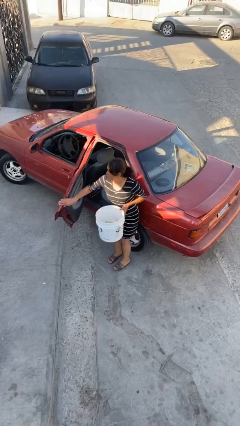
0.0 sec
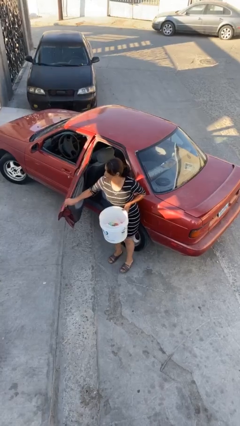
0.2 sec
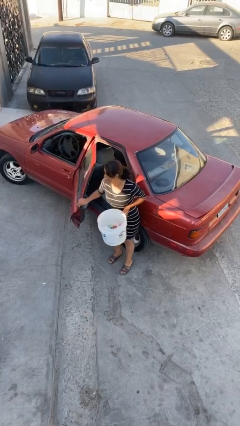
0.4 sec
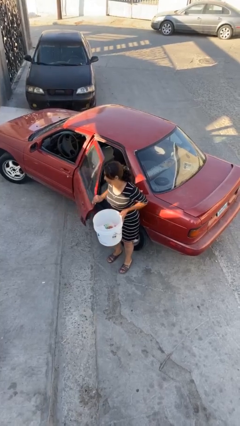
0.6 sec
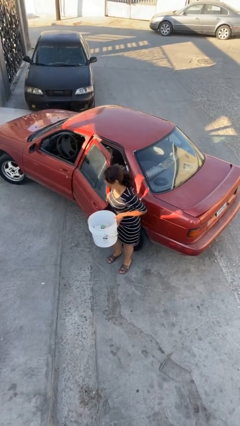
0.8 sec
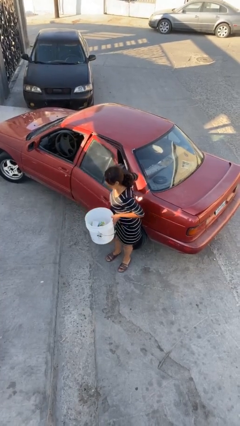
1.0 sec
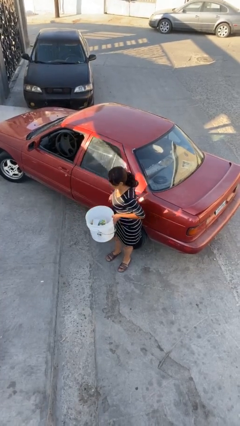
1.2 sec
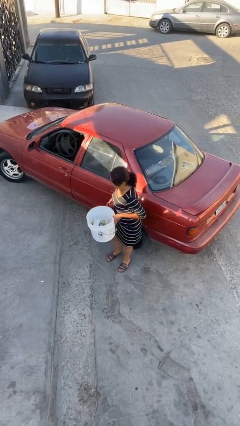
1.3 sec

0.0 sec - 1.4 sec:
person closes car door

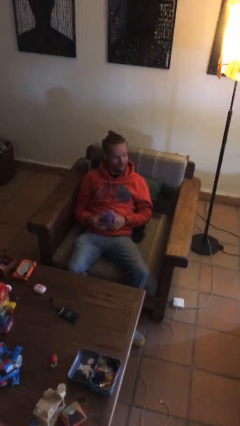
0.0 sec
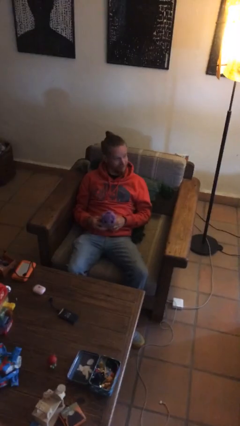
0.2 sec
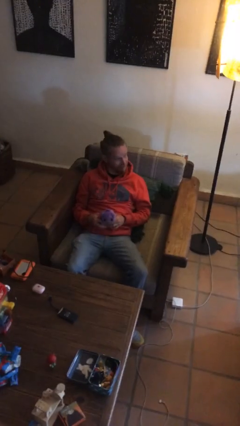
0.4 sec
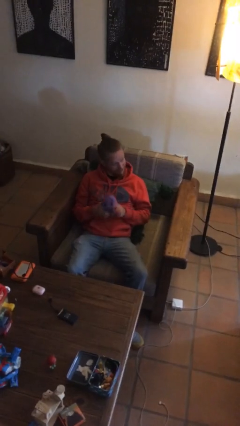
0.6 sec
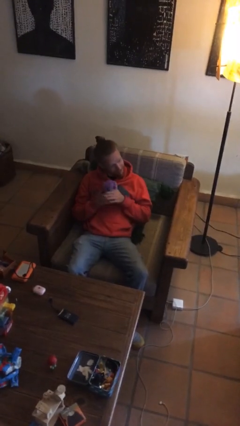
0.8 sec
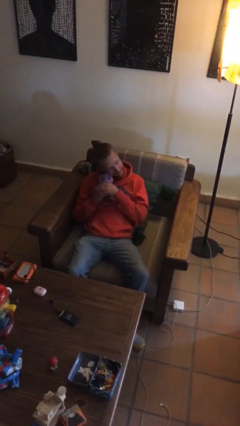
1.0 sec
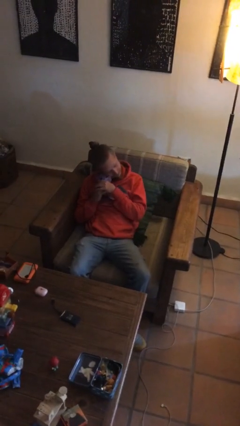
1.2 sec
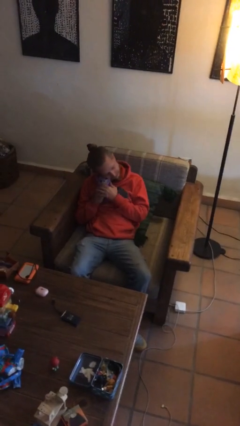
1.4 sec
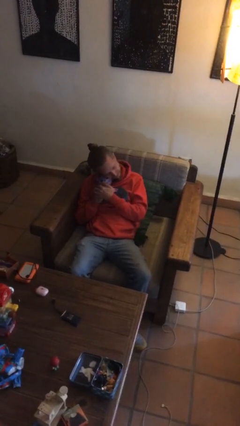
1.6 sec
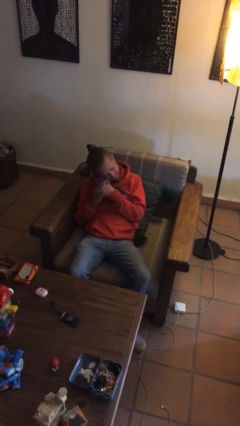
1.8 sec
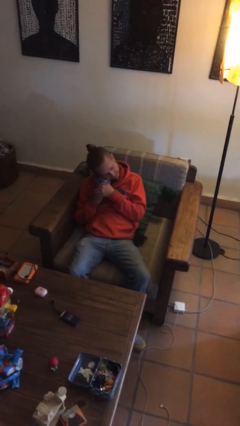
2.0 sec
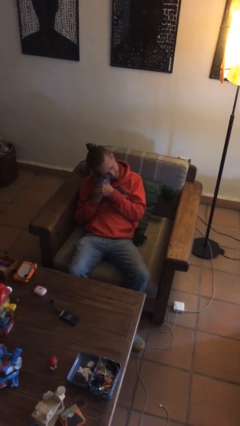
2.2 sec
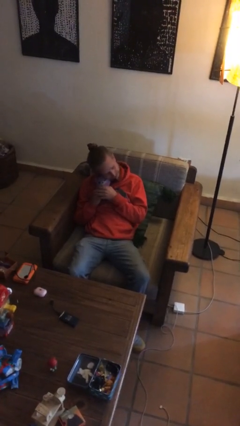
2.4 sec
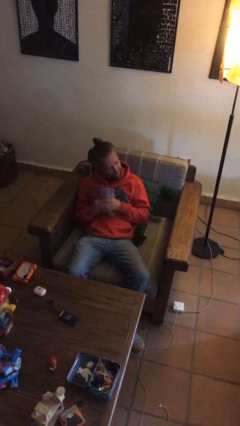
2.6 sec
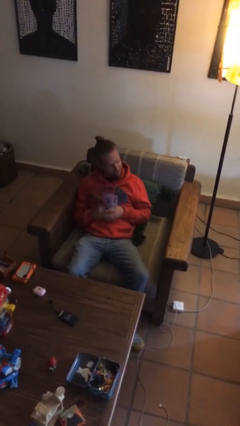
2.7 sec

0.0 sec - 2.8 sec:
person hugs stuffed animal

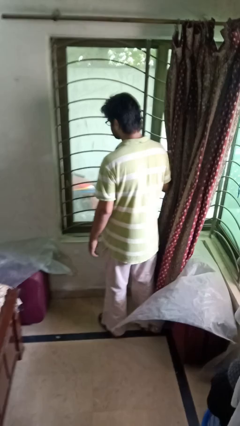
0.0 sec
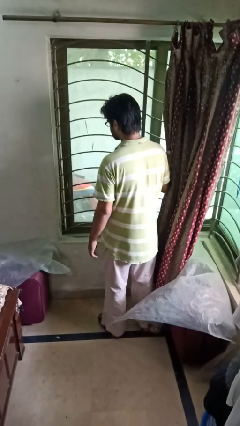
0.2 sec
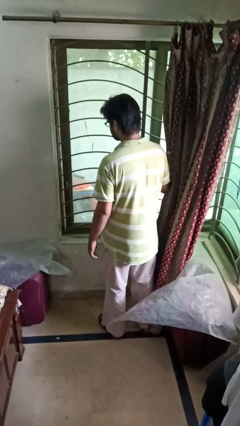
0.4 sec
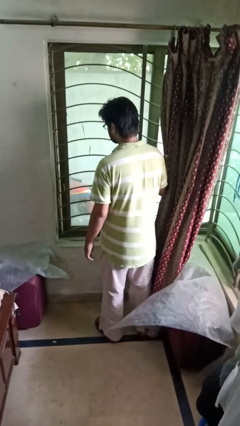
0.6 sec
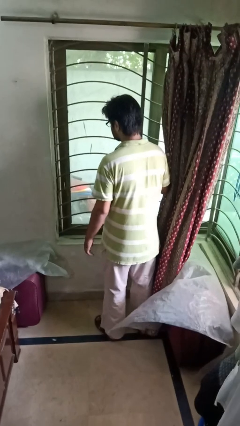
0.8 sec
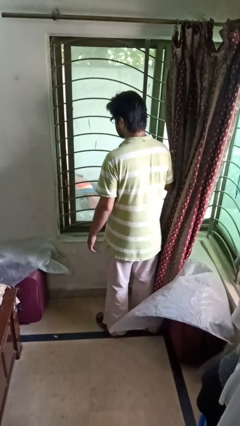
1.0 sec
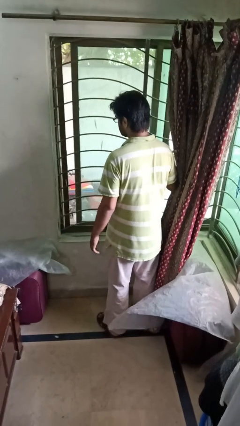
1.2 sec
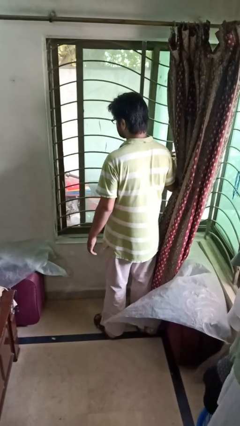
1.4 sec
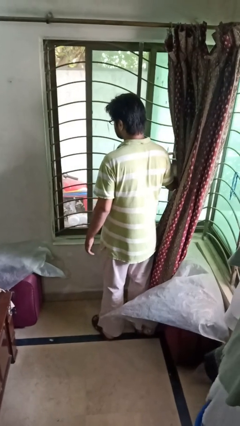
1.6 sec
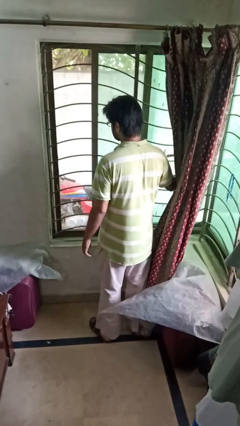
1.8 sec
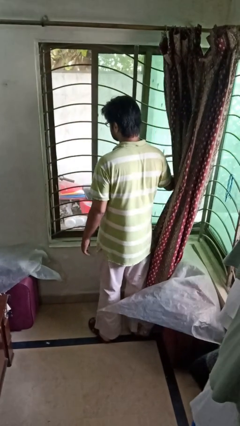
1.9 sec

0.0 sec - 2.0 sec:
person opens home window

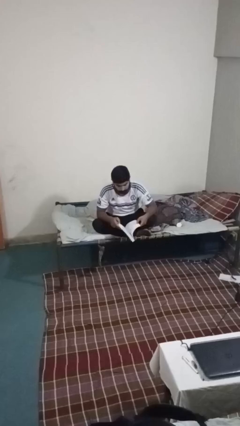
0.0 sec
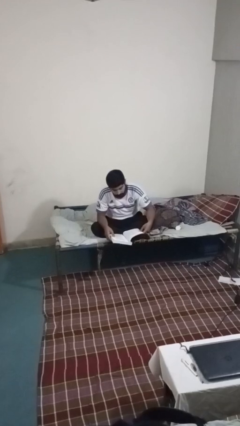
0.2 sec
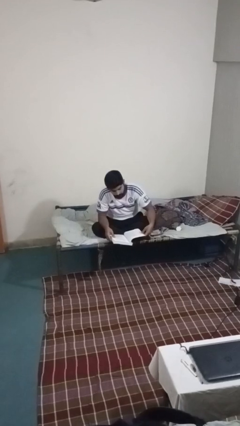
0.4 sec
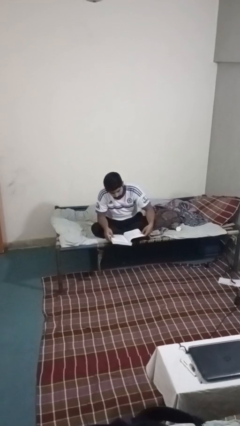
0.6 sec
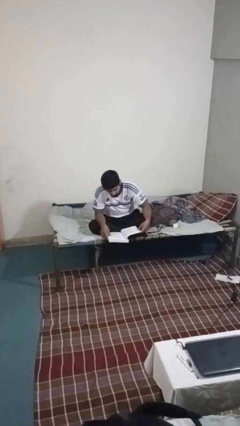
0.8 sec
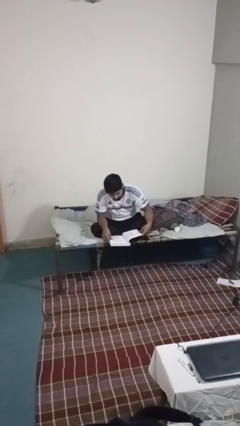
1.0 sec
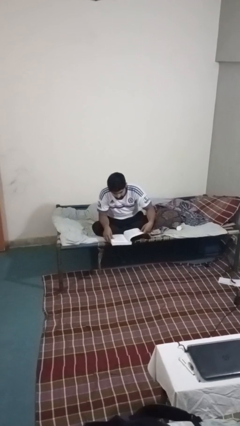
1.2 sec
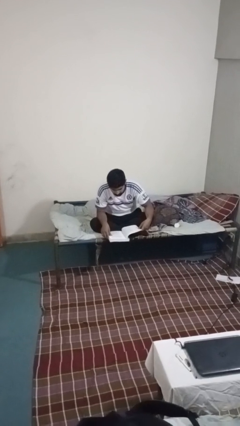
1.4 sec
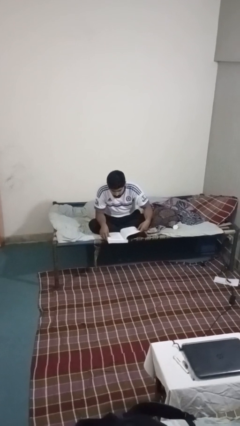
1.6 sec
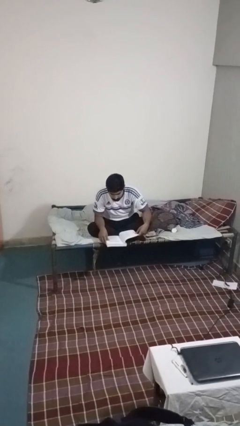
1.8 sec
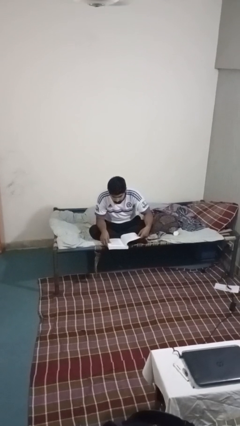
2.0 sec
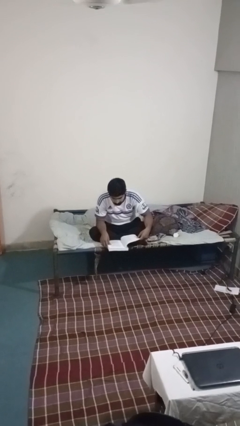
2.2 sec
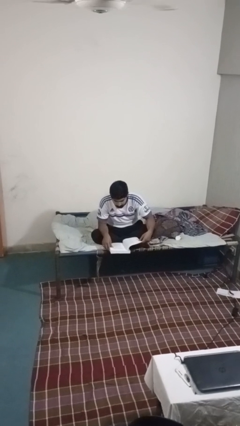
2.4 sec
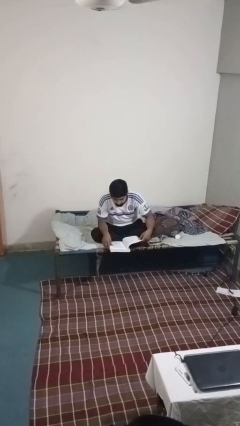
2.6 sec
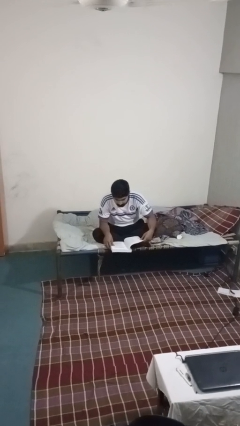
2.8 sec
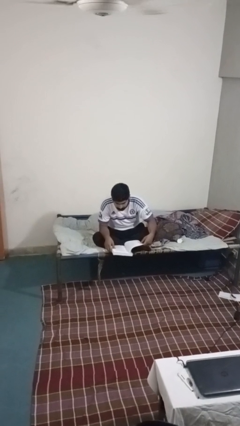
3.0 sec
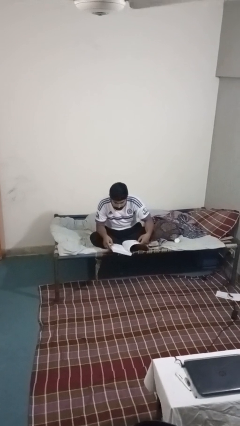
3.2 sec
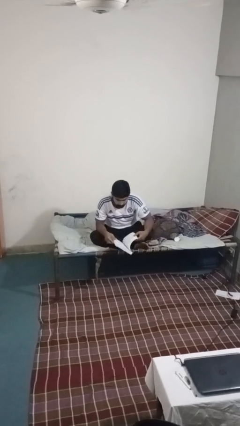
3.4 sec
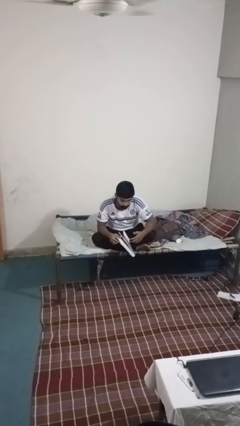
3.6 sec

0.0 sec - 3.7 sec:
person reads book

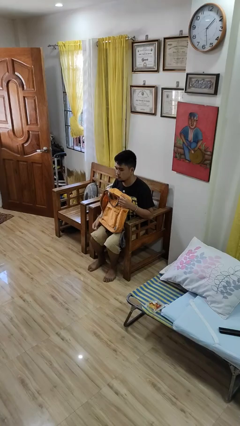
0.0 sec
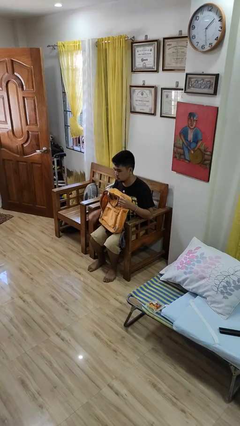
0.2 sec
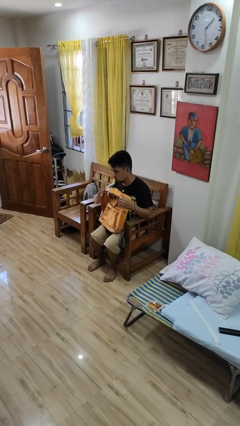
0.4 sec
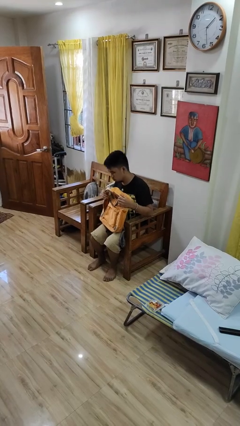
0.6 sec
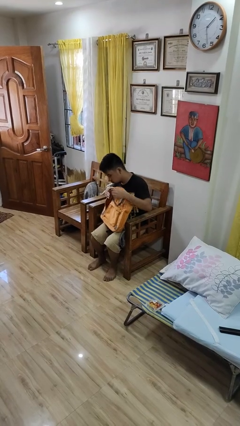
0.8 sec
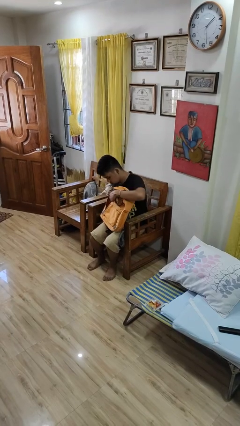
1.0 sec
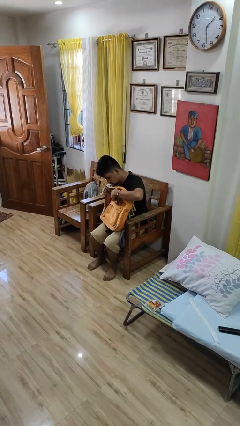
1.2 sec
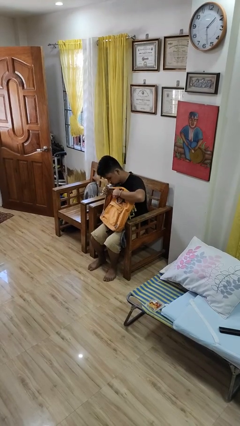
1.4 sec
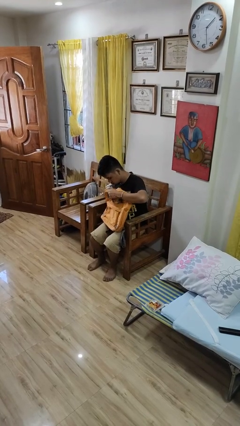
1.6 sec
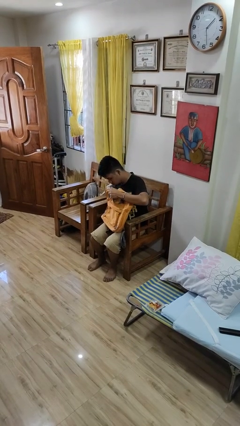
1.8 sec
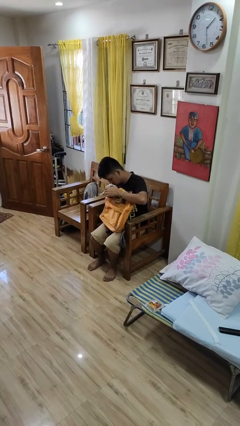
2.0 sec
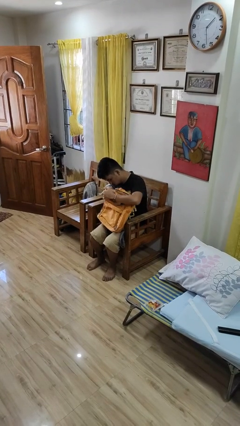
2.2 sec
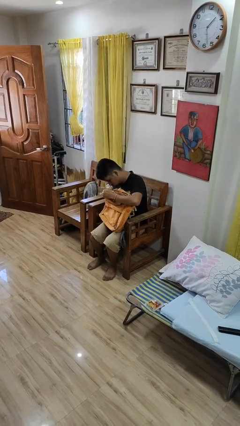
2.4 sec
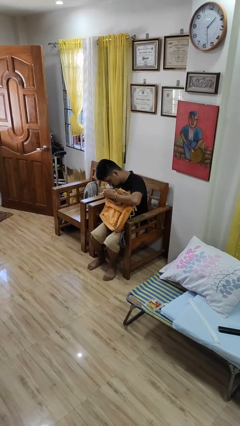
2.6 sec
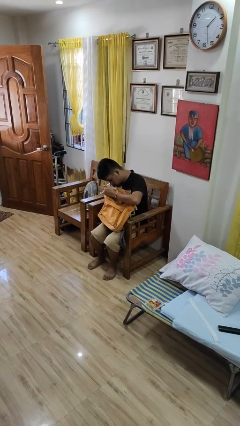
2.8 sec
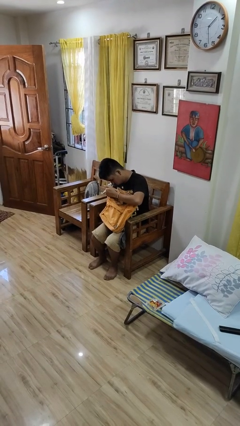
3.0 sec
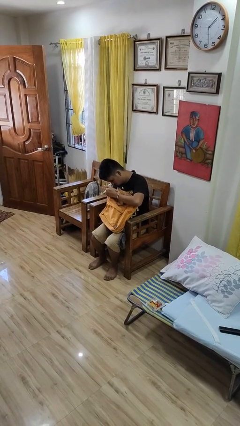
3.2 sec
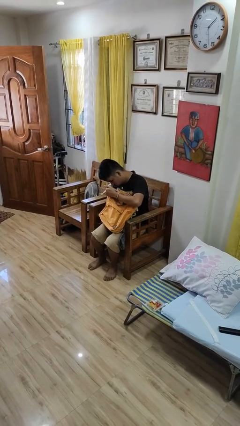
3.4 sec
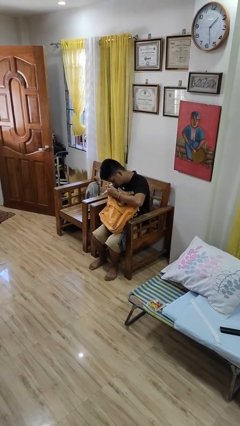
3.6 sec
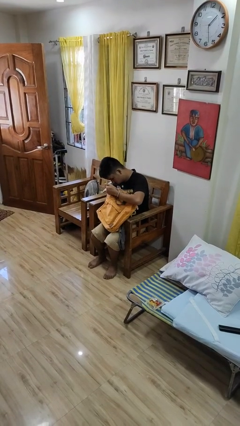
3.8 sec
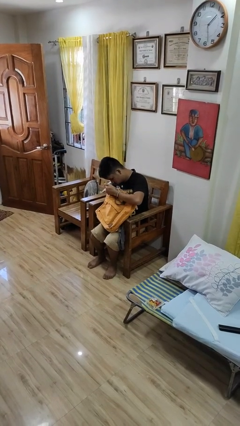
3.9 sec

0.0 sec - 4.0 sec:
person searches in backpack

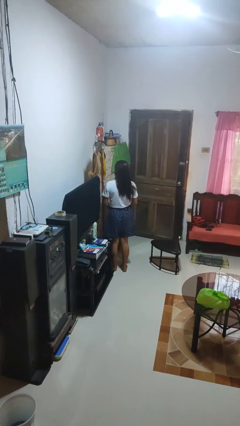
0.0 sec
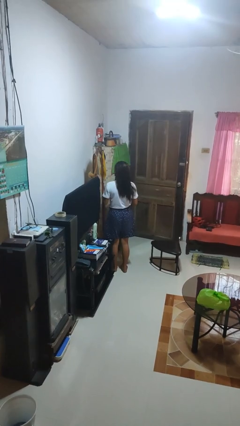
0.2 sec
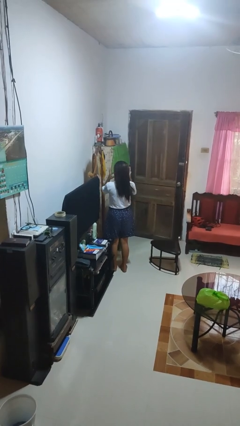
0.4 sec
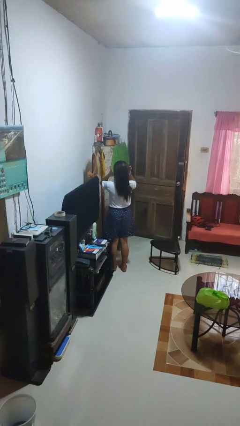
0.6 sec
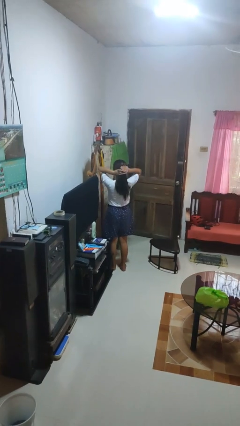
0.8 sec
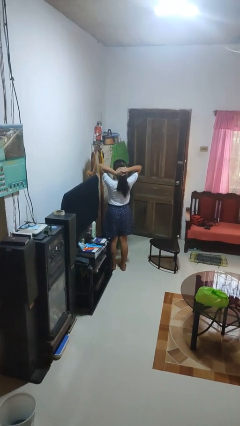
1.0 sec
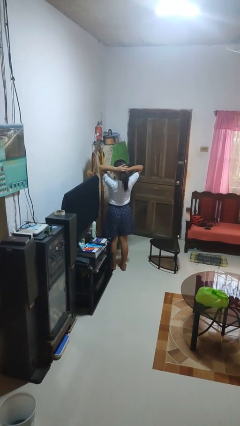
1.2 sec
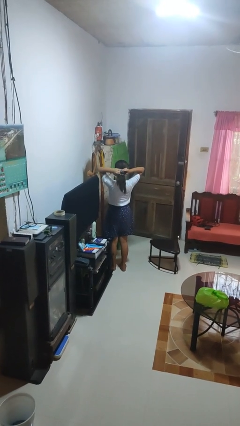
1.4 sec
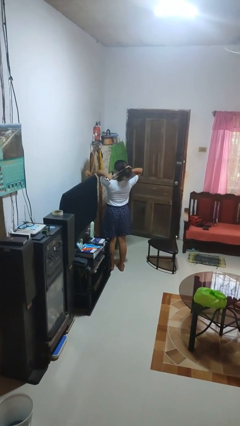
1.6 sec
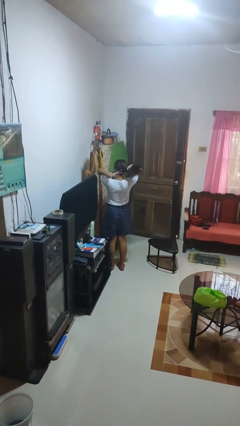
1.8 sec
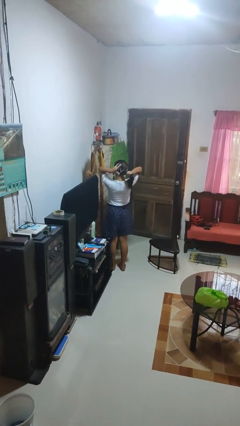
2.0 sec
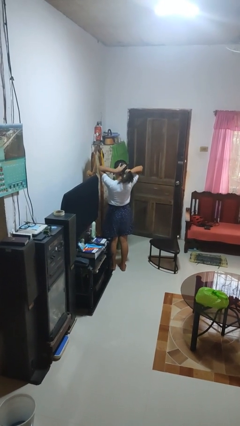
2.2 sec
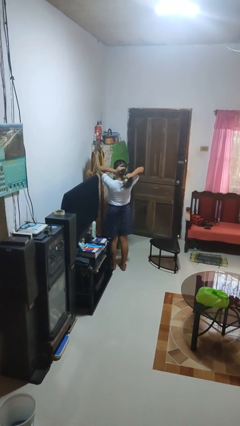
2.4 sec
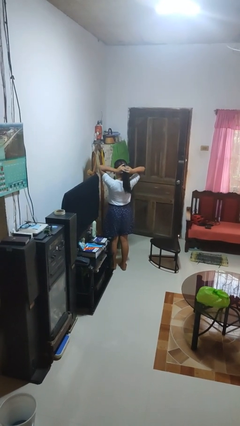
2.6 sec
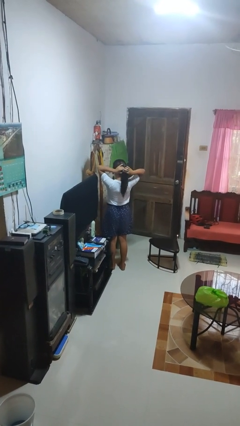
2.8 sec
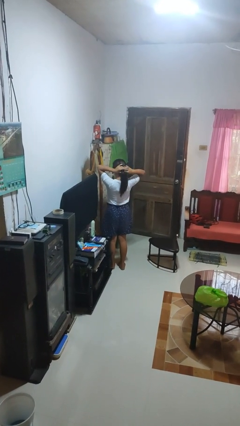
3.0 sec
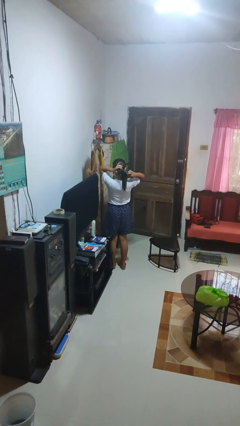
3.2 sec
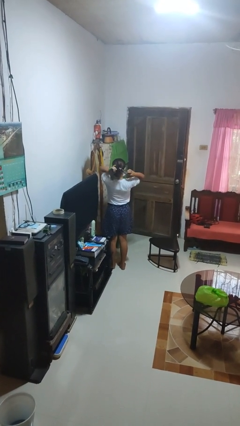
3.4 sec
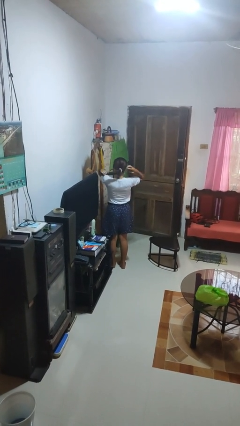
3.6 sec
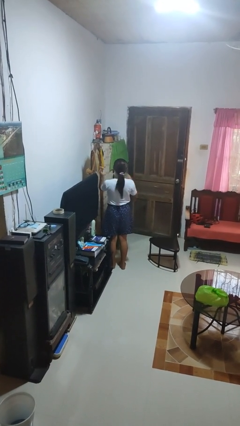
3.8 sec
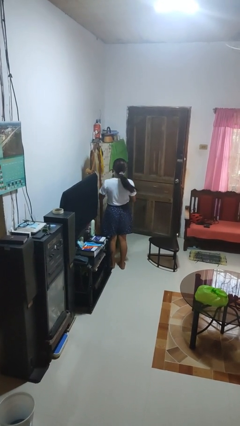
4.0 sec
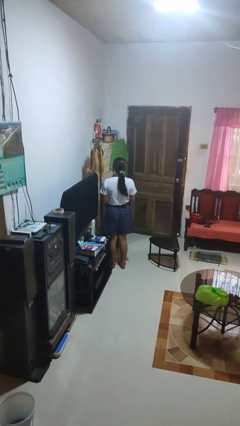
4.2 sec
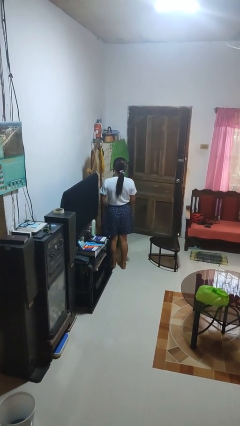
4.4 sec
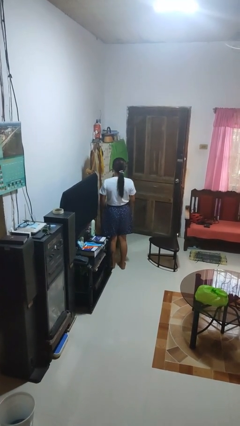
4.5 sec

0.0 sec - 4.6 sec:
person puts hair in ponytail
